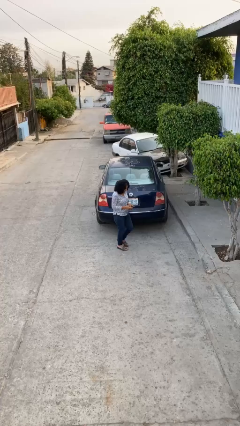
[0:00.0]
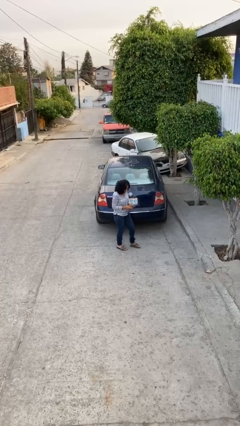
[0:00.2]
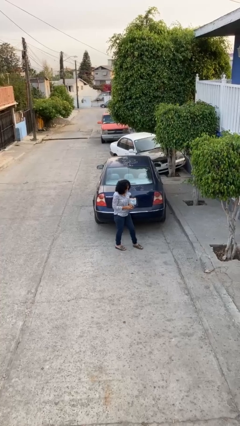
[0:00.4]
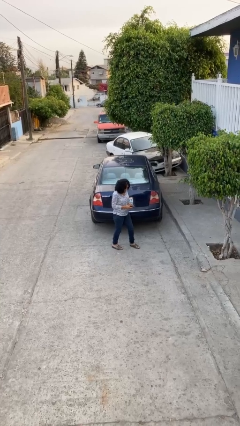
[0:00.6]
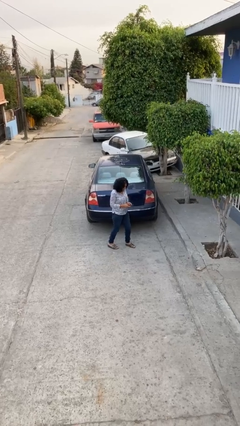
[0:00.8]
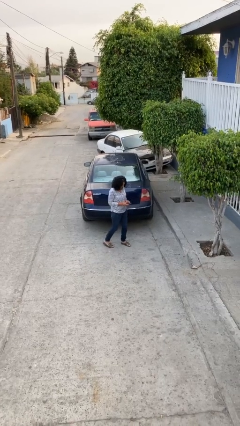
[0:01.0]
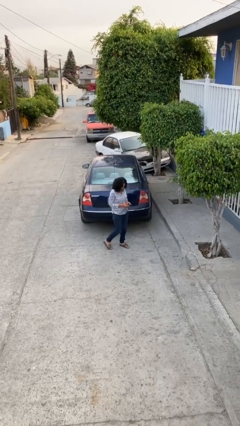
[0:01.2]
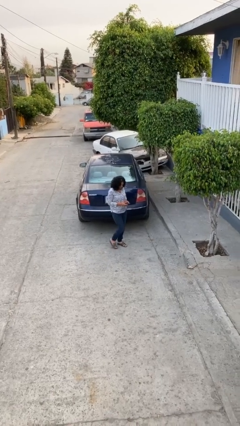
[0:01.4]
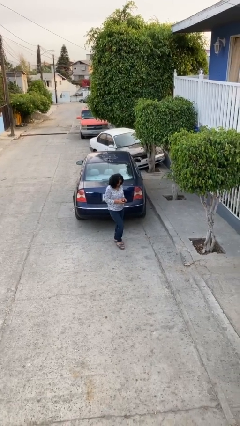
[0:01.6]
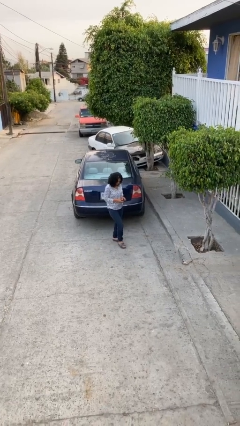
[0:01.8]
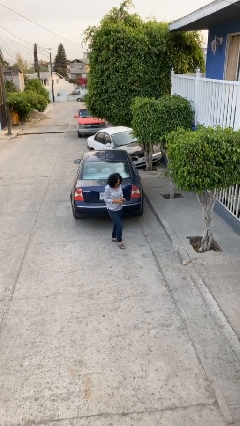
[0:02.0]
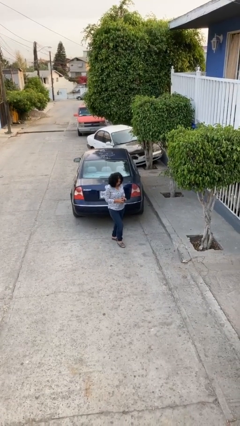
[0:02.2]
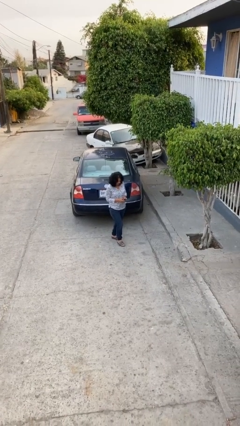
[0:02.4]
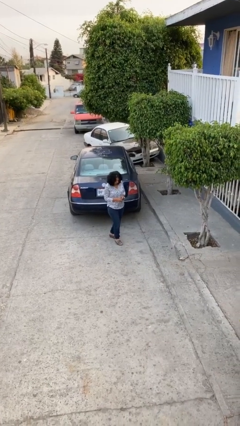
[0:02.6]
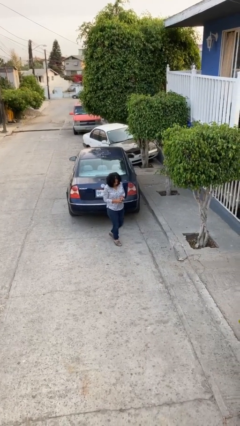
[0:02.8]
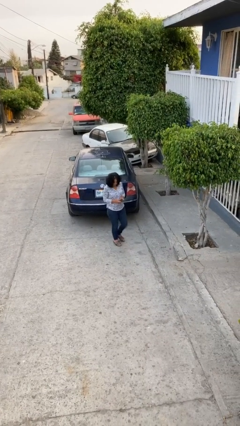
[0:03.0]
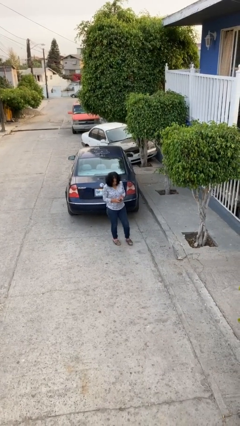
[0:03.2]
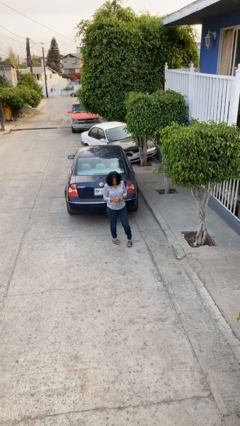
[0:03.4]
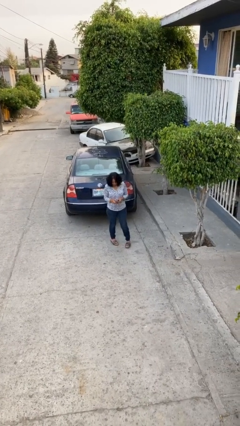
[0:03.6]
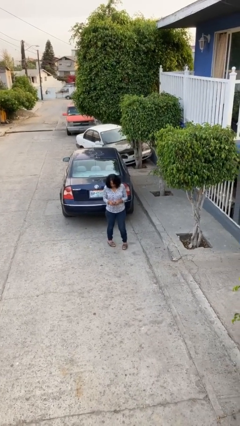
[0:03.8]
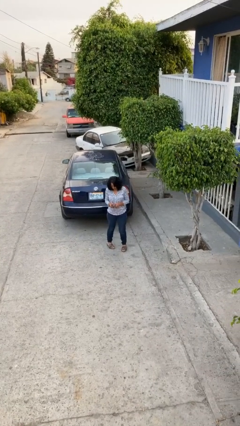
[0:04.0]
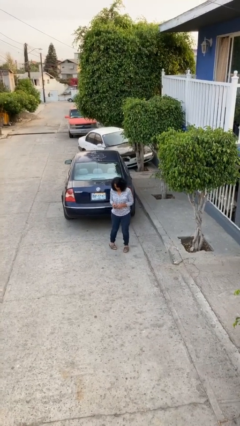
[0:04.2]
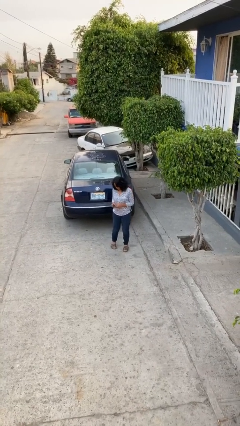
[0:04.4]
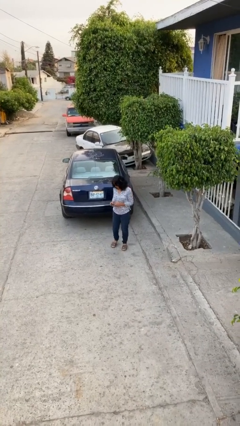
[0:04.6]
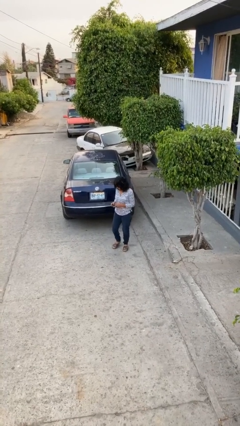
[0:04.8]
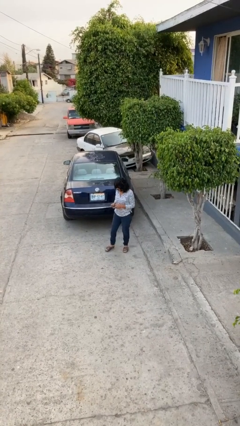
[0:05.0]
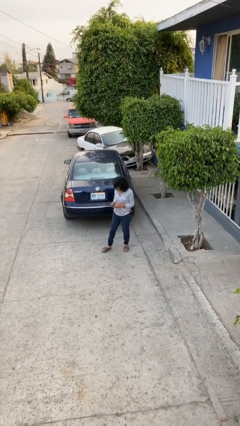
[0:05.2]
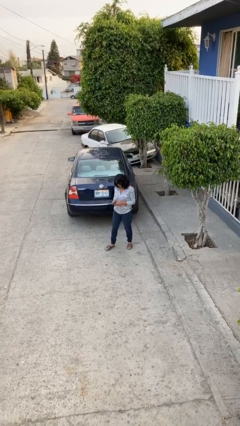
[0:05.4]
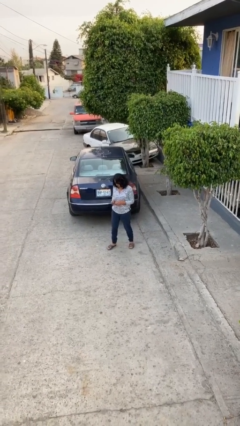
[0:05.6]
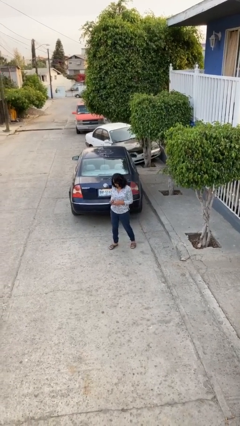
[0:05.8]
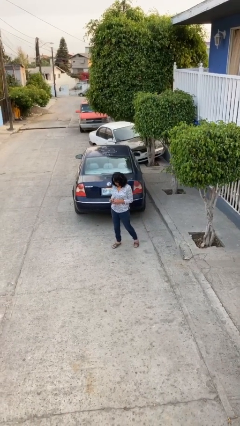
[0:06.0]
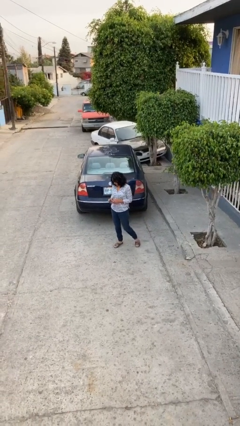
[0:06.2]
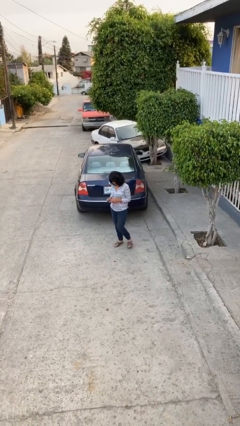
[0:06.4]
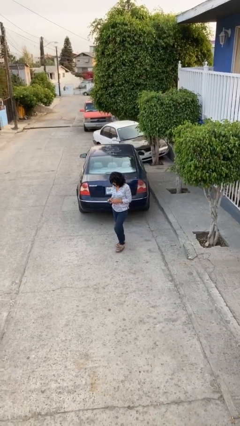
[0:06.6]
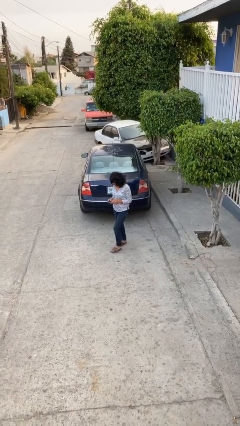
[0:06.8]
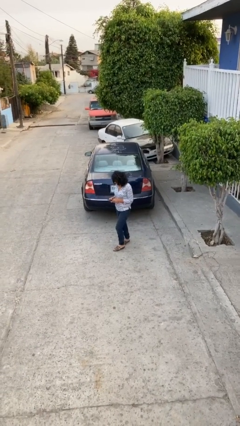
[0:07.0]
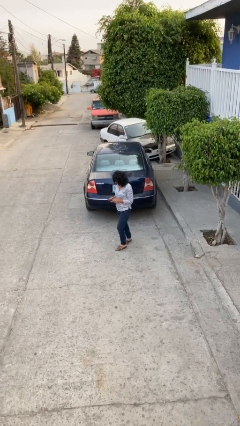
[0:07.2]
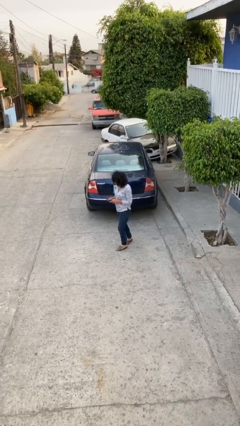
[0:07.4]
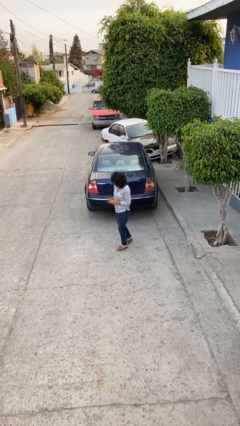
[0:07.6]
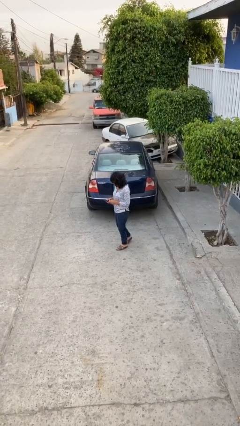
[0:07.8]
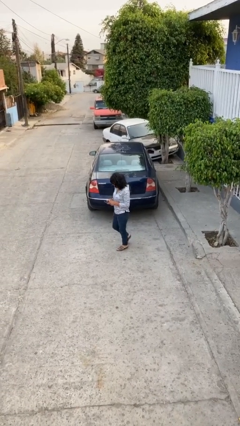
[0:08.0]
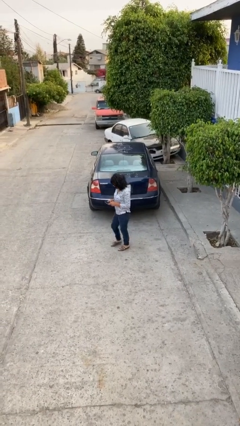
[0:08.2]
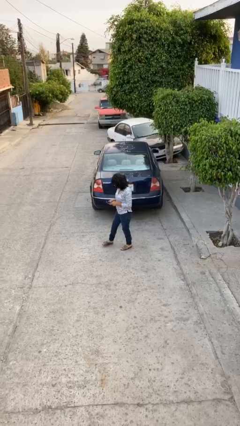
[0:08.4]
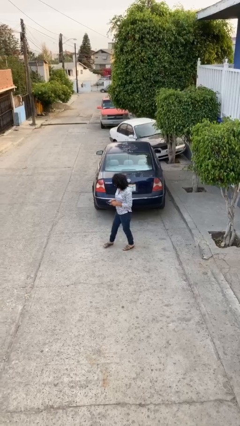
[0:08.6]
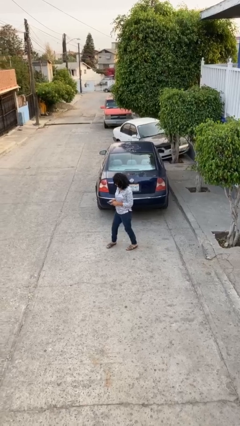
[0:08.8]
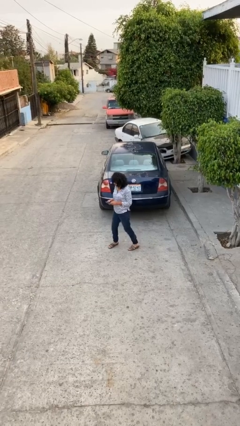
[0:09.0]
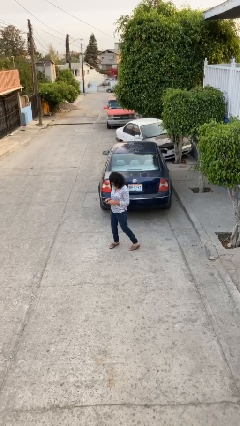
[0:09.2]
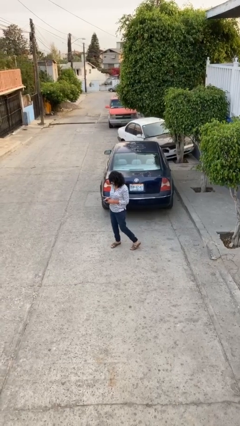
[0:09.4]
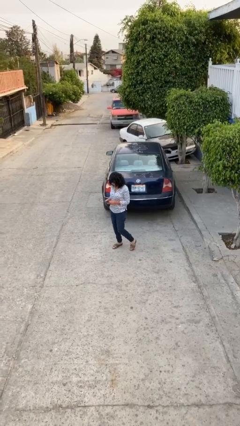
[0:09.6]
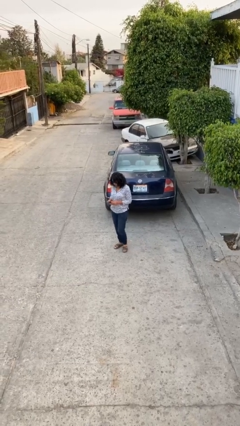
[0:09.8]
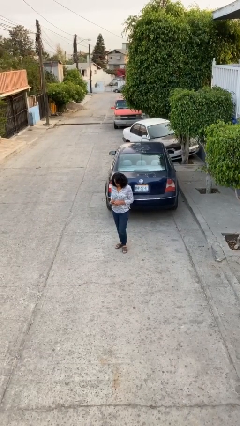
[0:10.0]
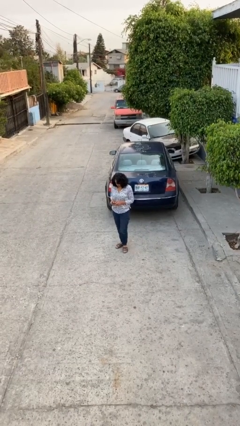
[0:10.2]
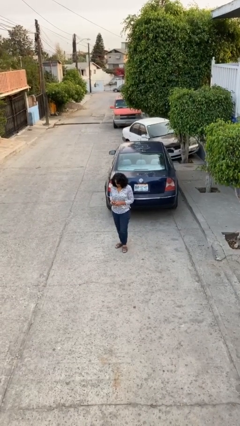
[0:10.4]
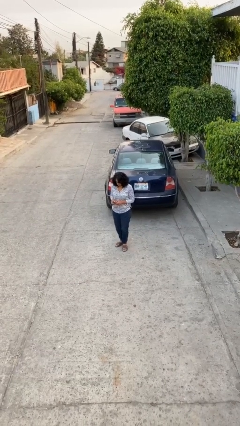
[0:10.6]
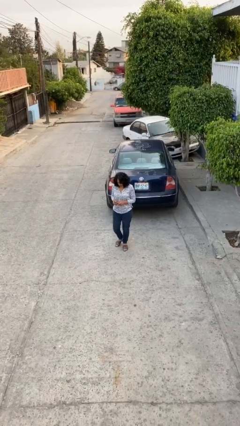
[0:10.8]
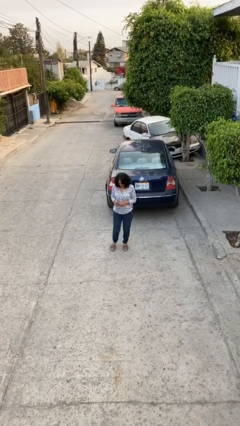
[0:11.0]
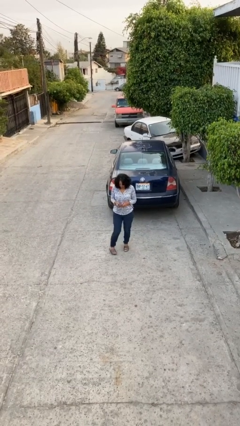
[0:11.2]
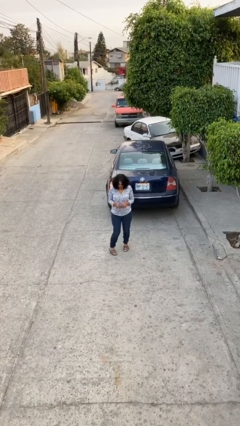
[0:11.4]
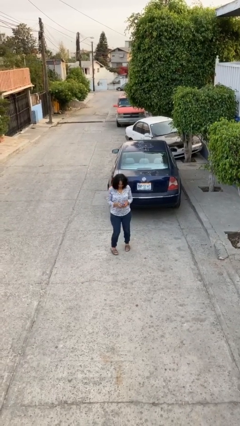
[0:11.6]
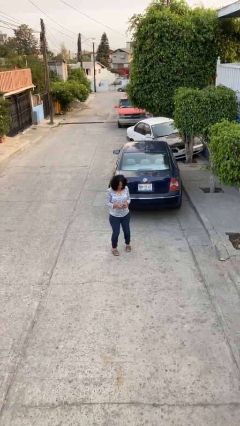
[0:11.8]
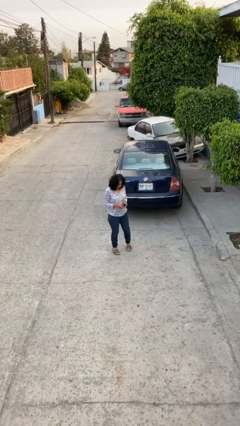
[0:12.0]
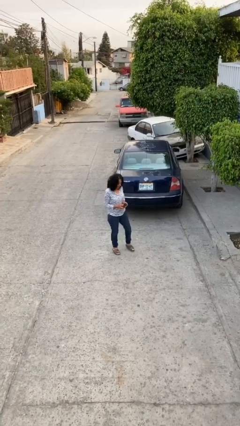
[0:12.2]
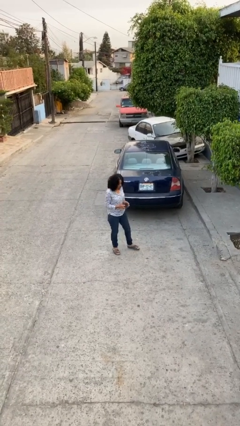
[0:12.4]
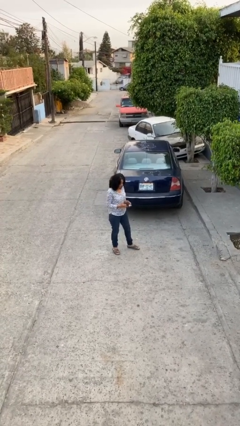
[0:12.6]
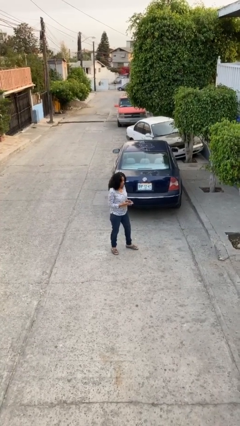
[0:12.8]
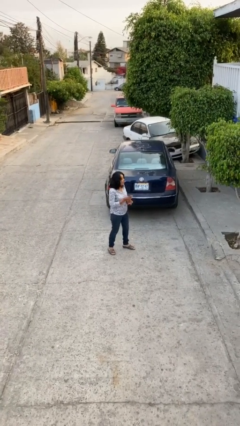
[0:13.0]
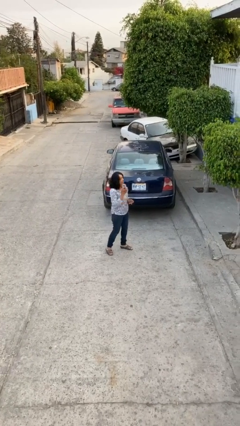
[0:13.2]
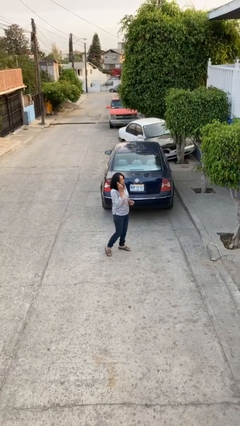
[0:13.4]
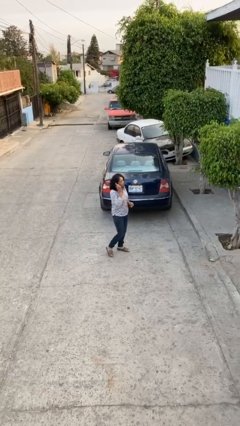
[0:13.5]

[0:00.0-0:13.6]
person texts on phone

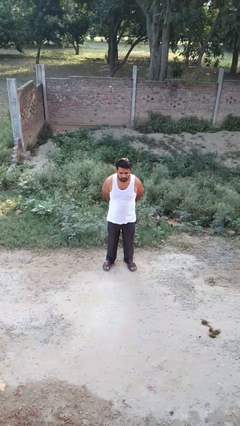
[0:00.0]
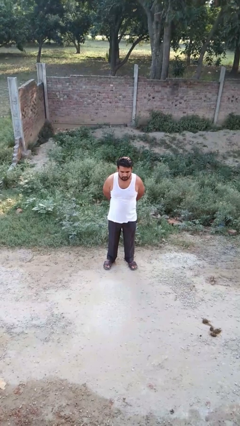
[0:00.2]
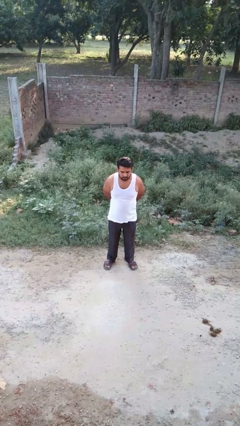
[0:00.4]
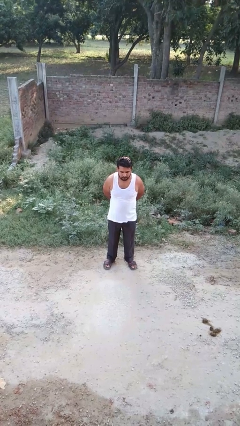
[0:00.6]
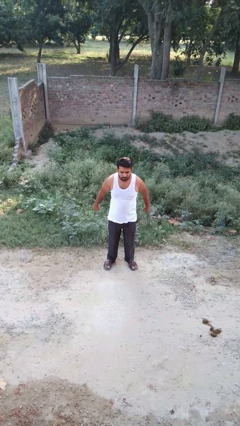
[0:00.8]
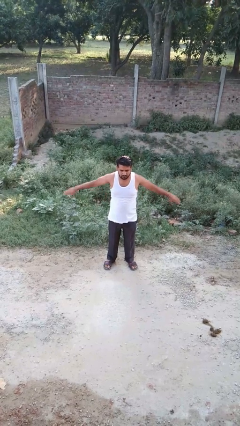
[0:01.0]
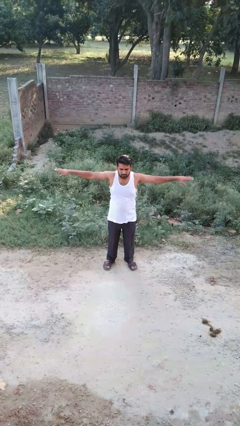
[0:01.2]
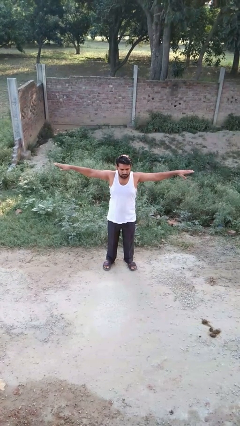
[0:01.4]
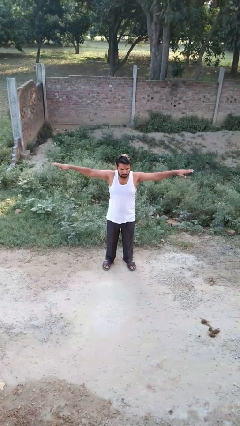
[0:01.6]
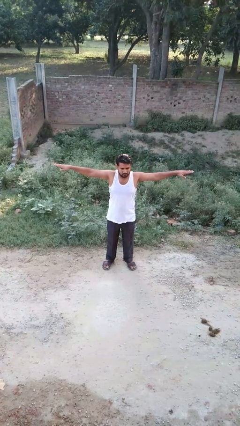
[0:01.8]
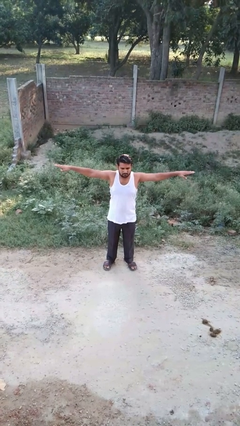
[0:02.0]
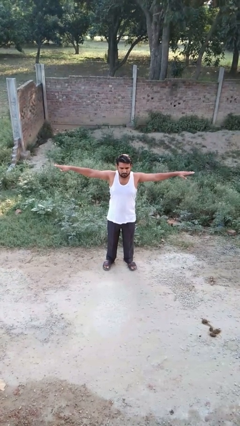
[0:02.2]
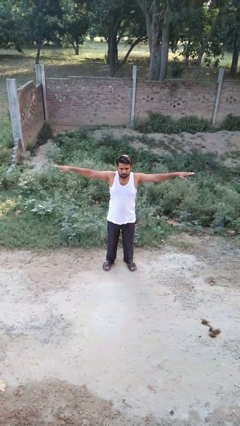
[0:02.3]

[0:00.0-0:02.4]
person stretches arms to side

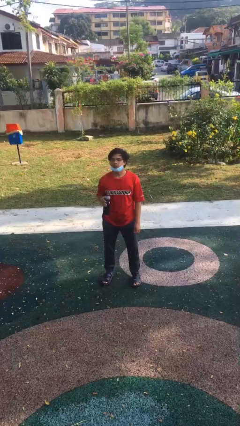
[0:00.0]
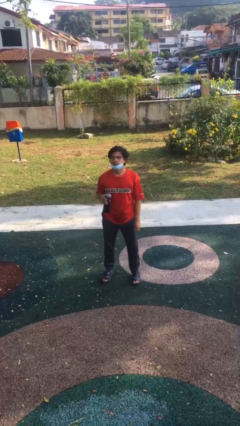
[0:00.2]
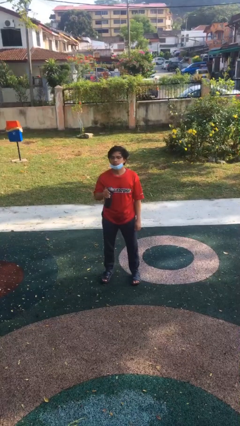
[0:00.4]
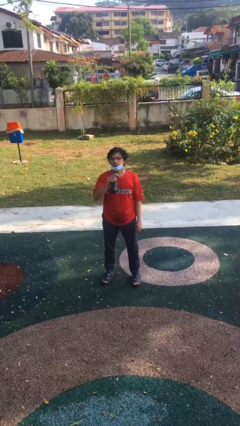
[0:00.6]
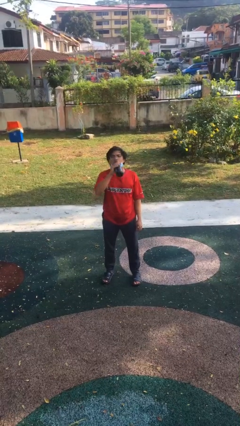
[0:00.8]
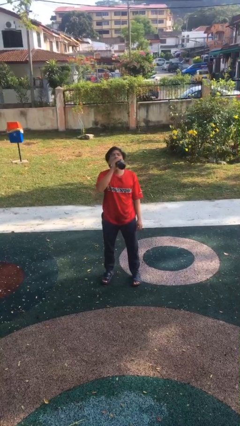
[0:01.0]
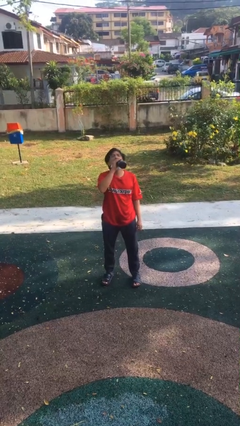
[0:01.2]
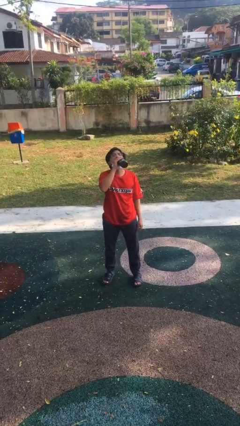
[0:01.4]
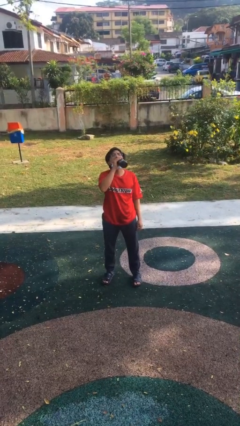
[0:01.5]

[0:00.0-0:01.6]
person drinks from bottle

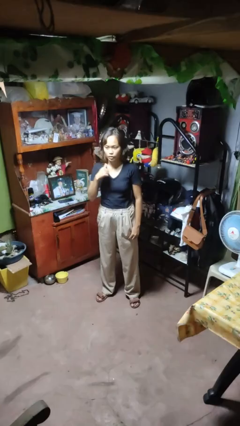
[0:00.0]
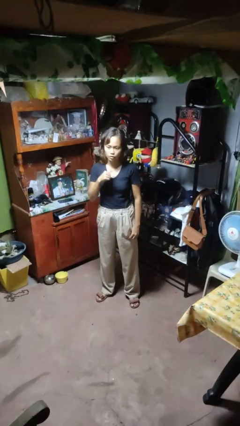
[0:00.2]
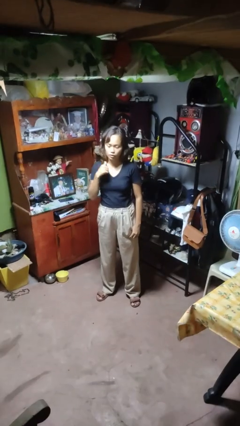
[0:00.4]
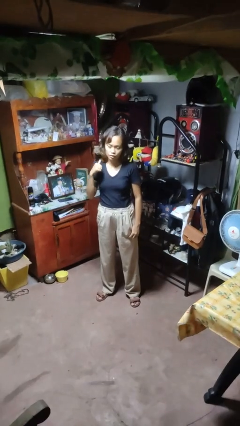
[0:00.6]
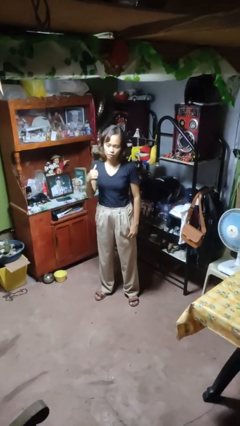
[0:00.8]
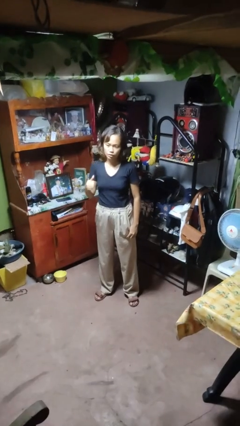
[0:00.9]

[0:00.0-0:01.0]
person gestures cut
